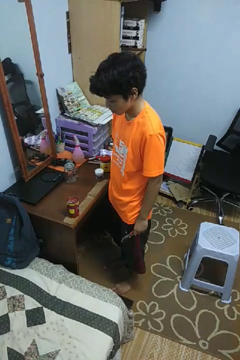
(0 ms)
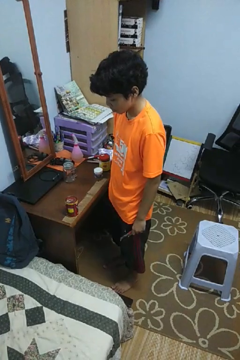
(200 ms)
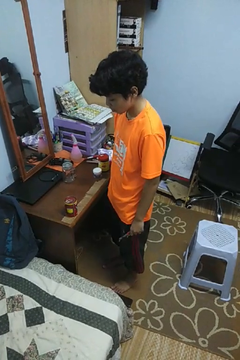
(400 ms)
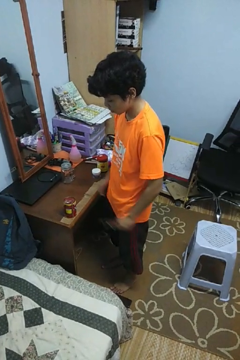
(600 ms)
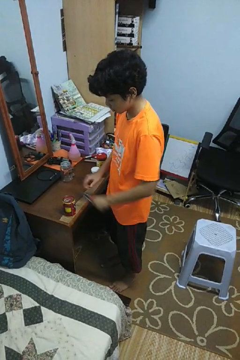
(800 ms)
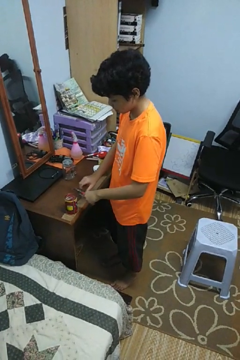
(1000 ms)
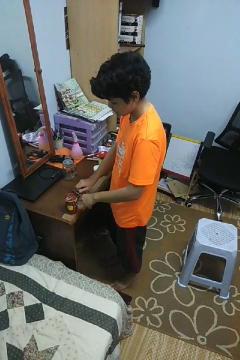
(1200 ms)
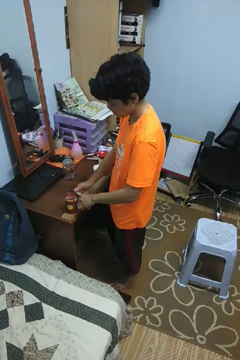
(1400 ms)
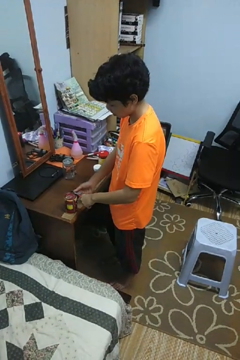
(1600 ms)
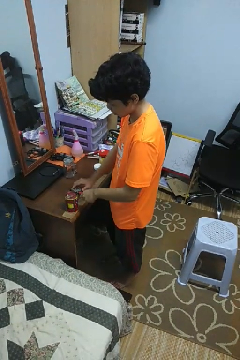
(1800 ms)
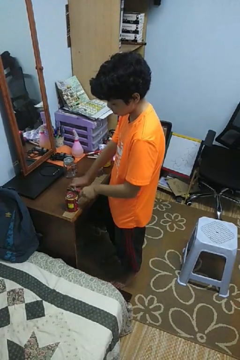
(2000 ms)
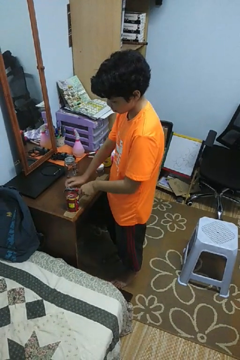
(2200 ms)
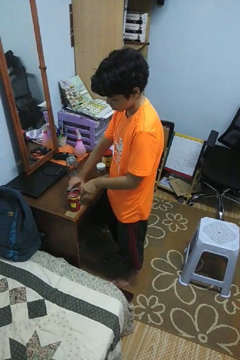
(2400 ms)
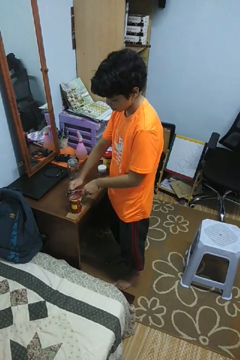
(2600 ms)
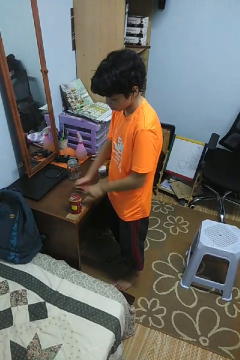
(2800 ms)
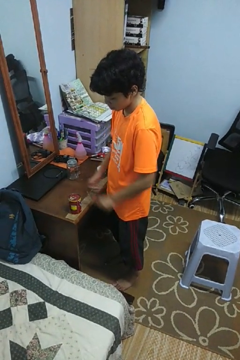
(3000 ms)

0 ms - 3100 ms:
person opens can with can opener

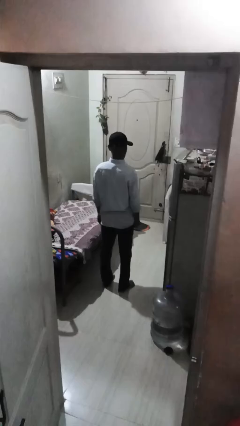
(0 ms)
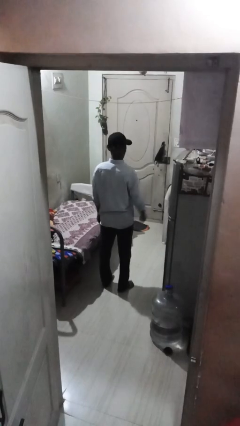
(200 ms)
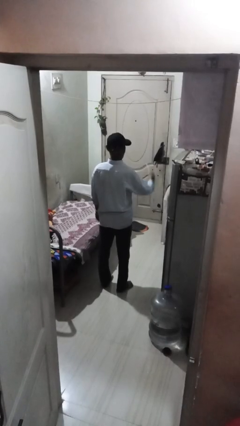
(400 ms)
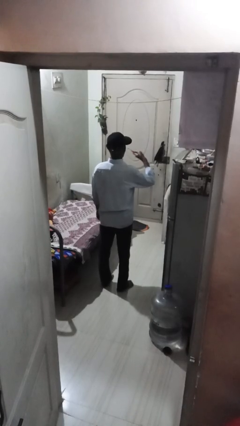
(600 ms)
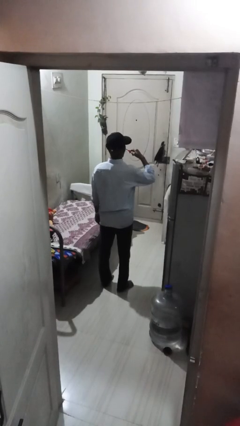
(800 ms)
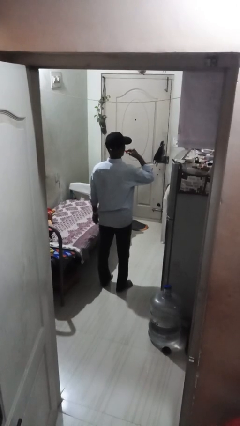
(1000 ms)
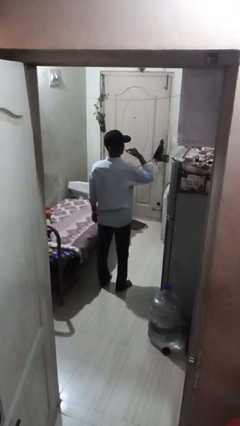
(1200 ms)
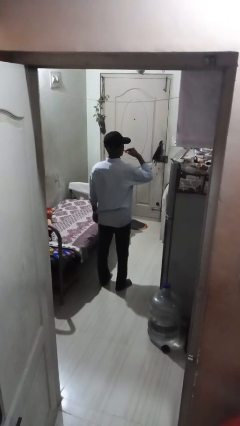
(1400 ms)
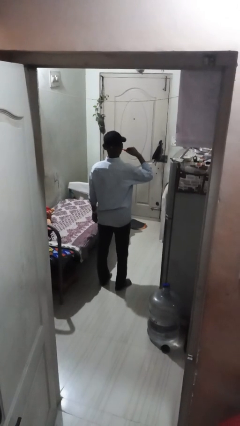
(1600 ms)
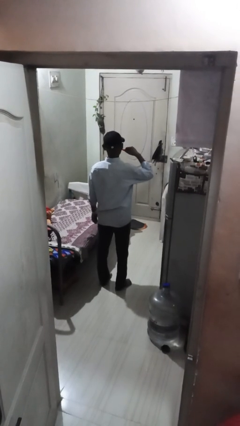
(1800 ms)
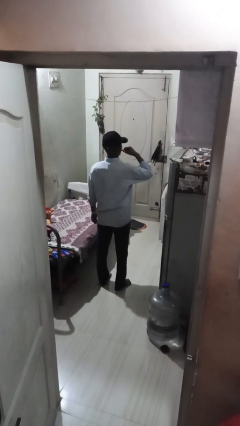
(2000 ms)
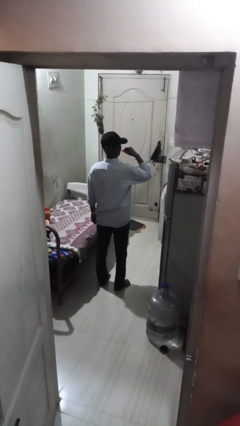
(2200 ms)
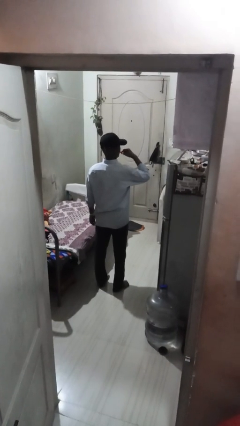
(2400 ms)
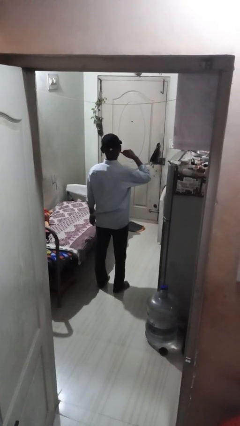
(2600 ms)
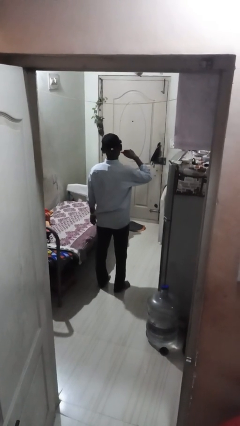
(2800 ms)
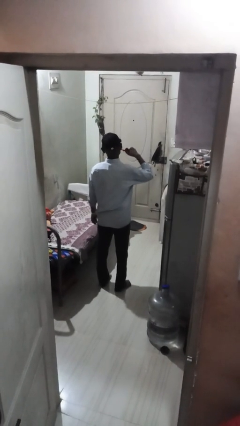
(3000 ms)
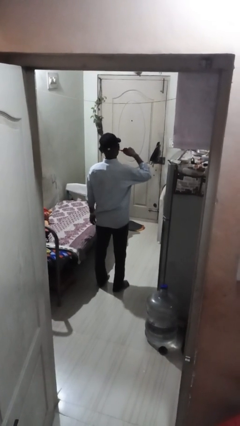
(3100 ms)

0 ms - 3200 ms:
person brushes teeth

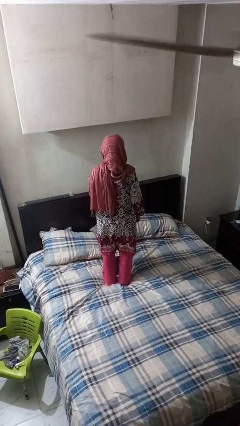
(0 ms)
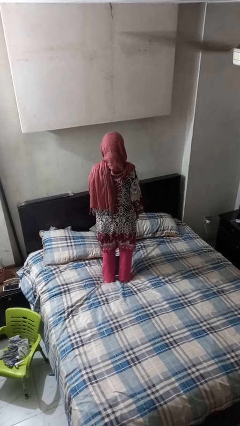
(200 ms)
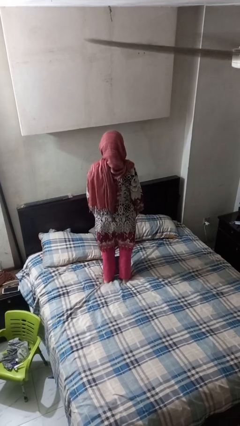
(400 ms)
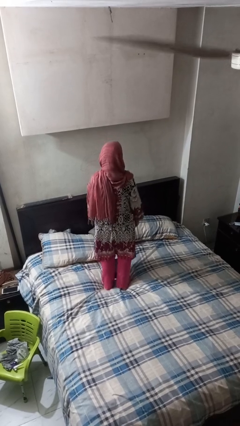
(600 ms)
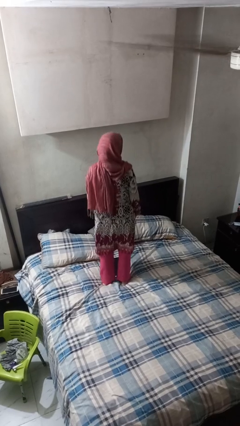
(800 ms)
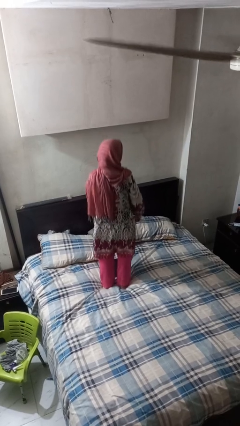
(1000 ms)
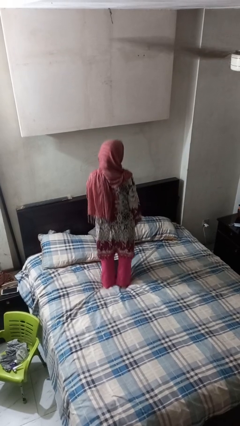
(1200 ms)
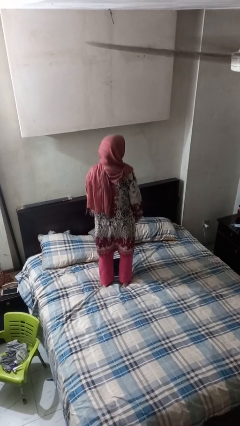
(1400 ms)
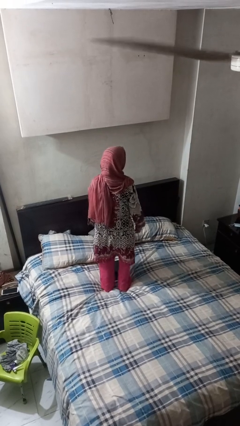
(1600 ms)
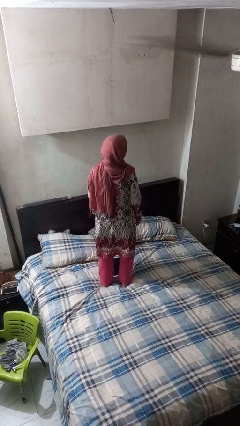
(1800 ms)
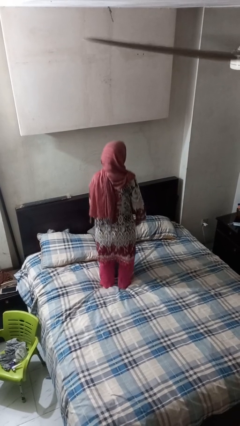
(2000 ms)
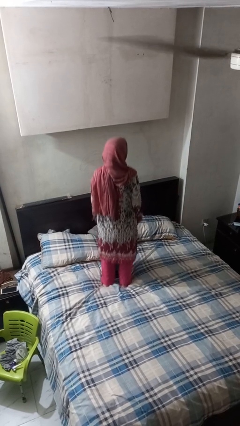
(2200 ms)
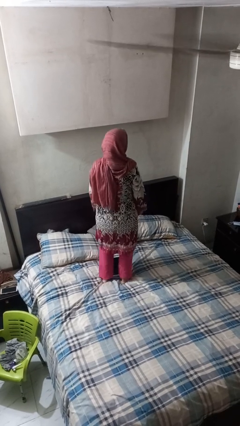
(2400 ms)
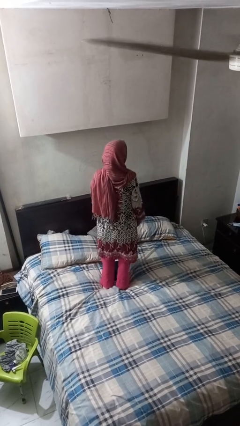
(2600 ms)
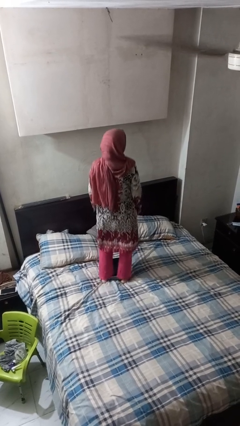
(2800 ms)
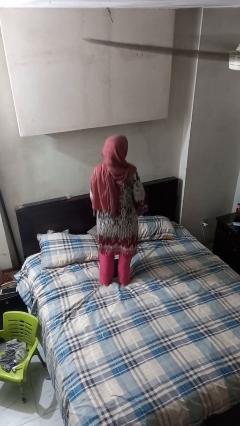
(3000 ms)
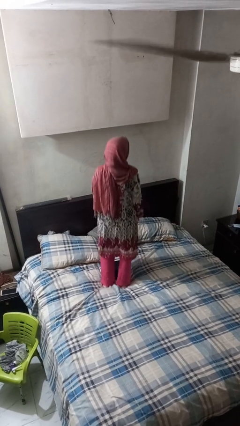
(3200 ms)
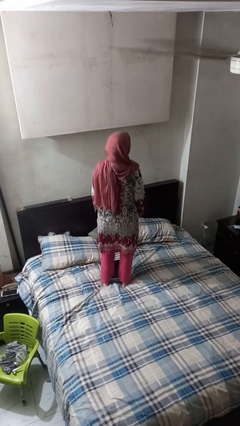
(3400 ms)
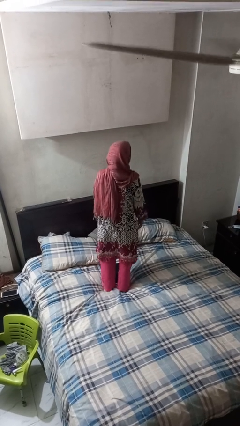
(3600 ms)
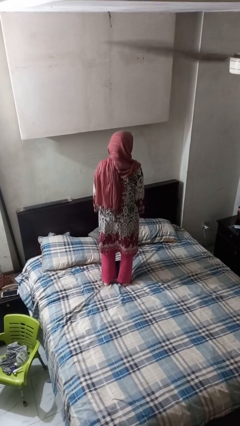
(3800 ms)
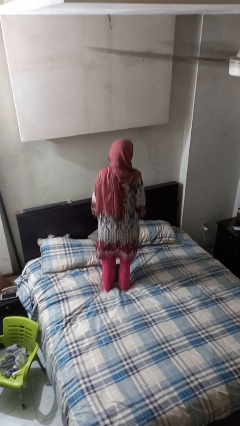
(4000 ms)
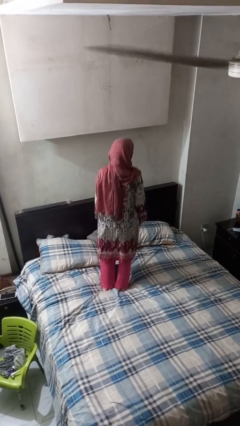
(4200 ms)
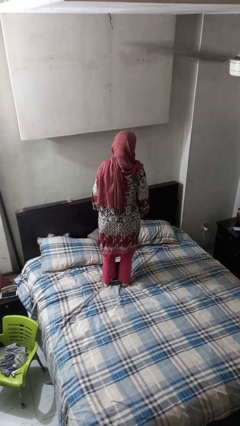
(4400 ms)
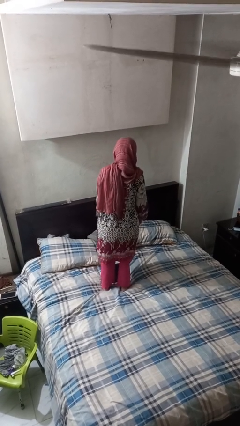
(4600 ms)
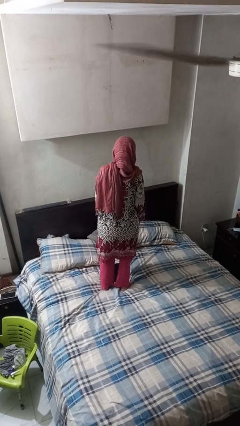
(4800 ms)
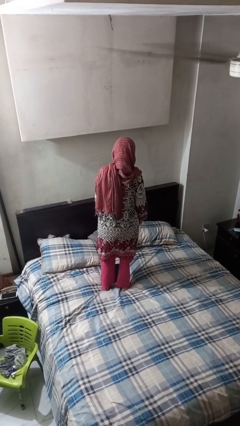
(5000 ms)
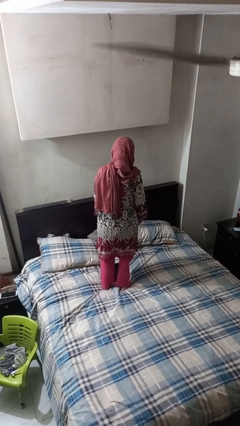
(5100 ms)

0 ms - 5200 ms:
person jumps on bed

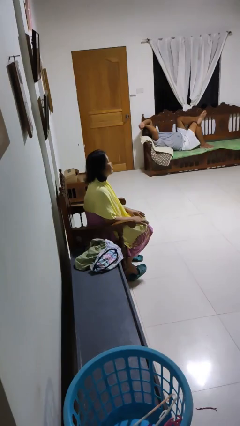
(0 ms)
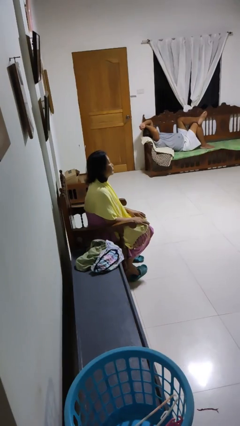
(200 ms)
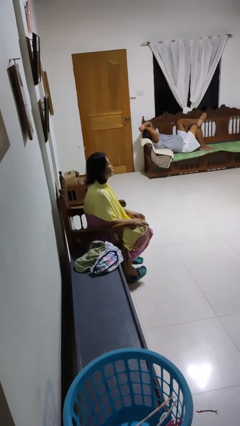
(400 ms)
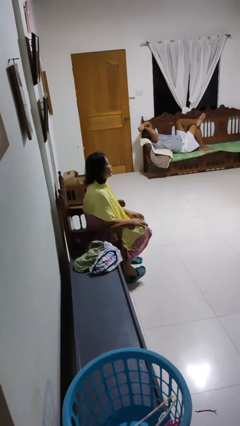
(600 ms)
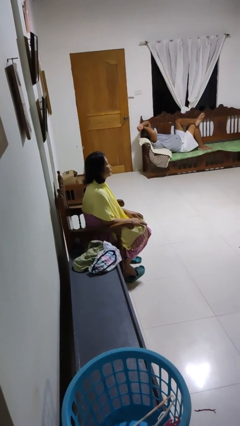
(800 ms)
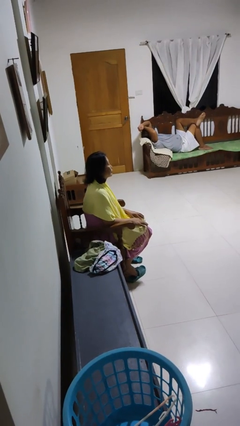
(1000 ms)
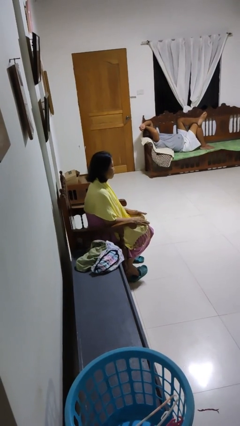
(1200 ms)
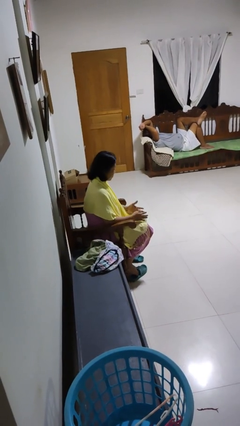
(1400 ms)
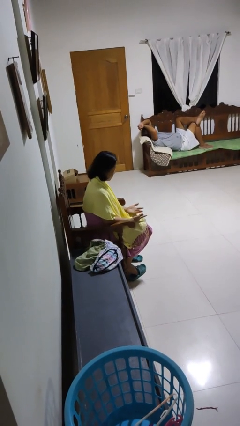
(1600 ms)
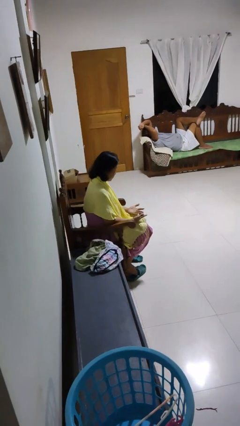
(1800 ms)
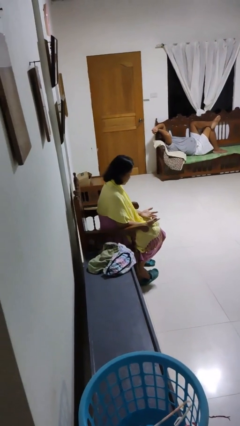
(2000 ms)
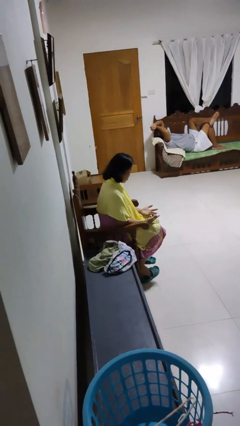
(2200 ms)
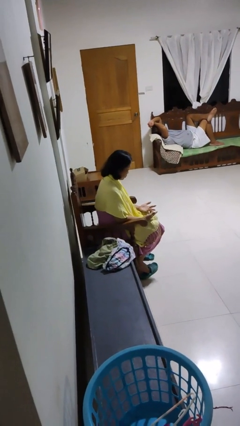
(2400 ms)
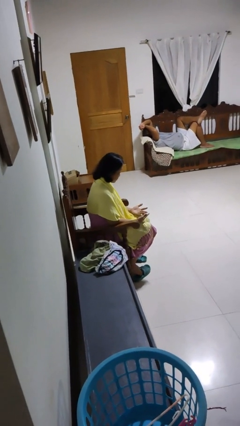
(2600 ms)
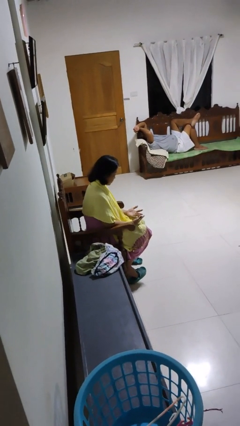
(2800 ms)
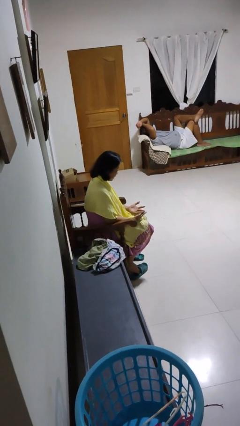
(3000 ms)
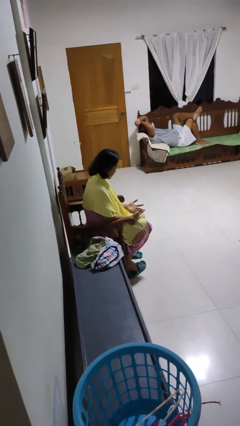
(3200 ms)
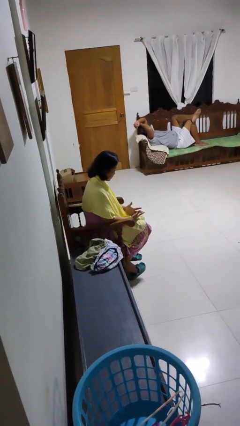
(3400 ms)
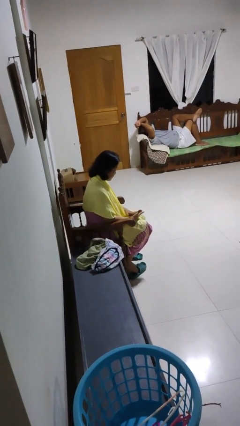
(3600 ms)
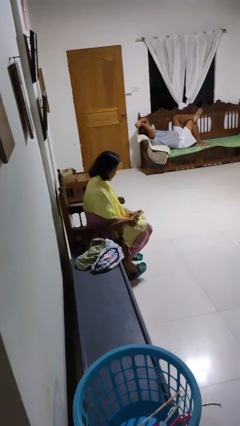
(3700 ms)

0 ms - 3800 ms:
person looks at hands in lap

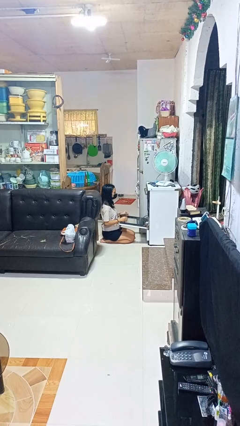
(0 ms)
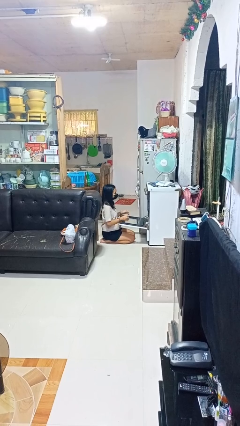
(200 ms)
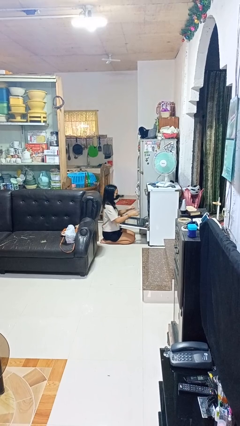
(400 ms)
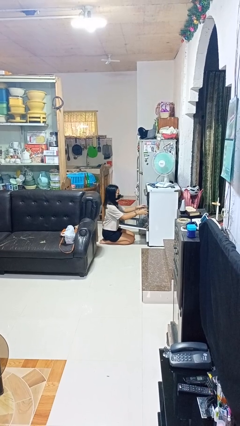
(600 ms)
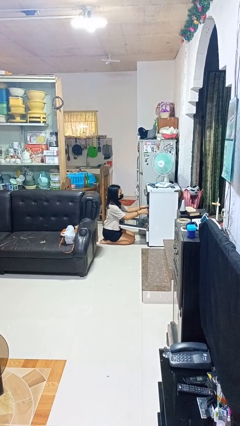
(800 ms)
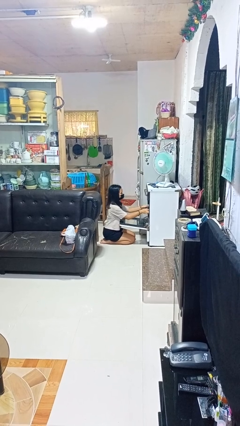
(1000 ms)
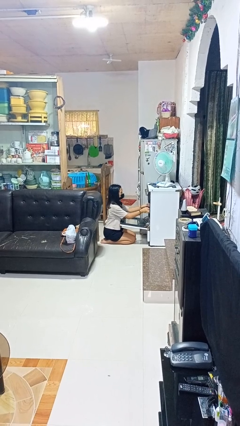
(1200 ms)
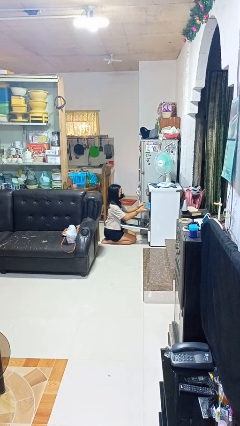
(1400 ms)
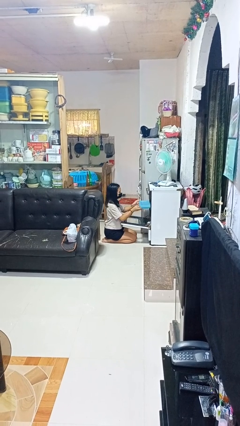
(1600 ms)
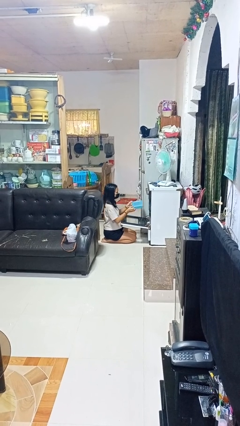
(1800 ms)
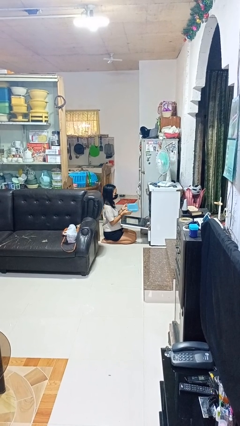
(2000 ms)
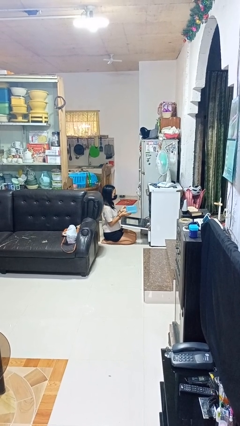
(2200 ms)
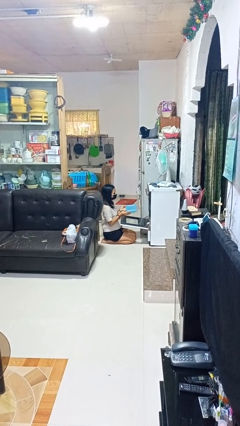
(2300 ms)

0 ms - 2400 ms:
person takes object from oven

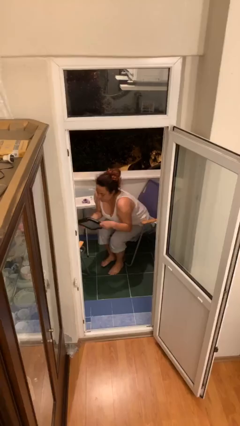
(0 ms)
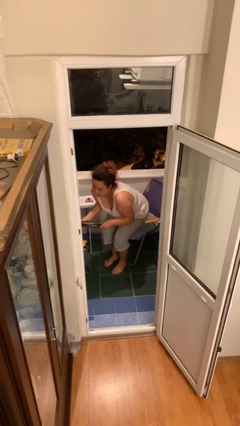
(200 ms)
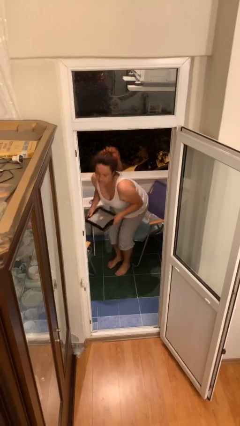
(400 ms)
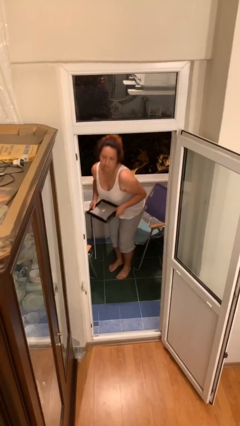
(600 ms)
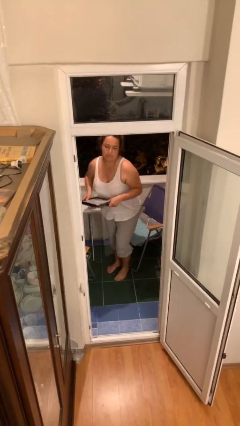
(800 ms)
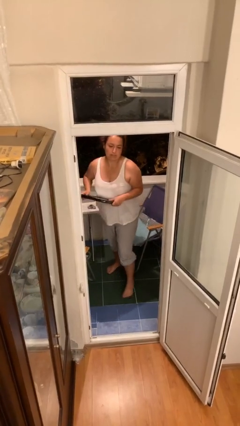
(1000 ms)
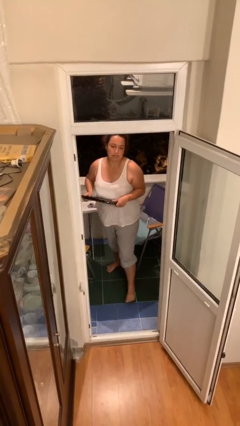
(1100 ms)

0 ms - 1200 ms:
person stands up
